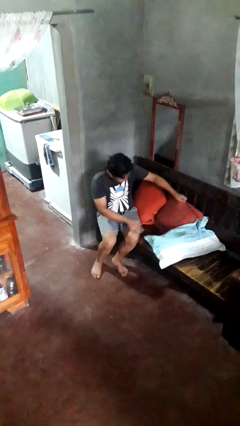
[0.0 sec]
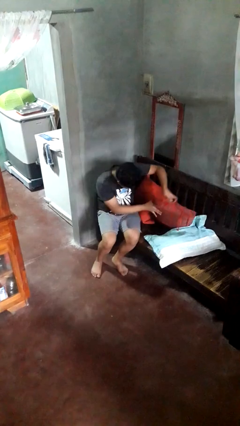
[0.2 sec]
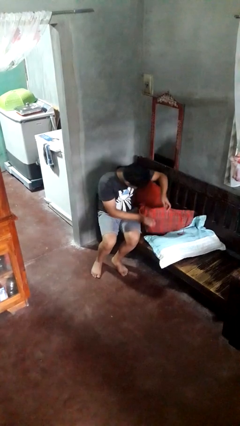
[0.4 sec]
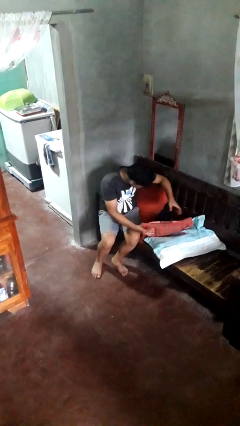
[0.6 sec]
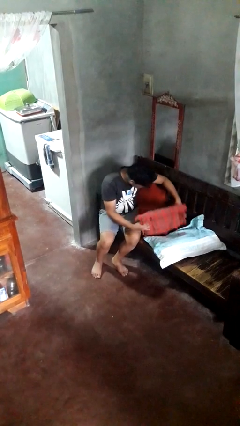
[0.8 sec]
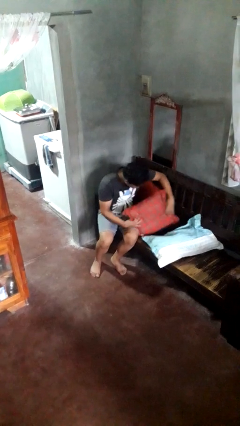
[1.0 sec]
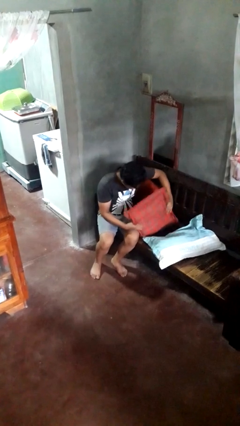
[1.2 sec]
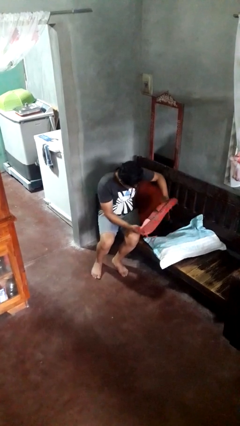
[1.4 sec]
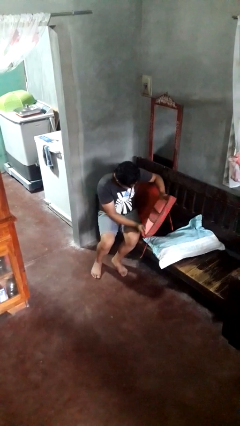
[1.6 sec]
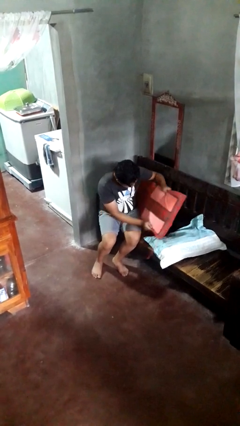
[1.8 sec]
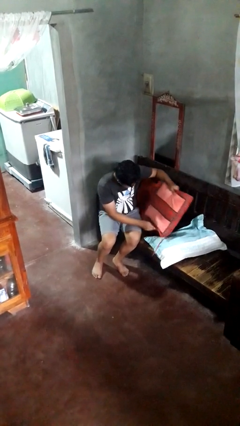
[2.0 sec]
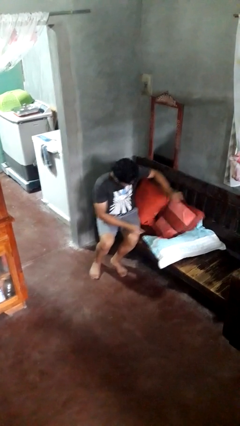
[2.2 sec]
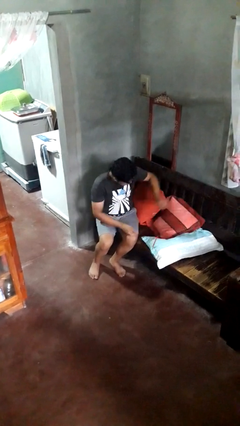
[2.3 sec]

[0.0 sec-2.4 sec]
person searches in couch

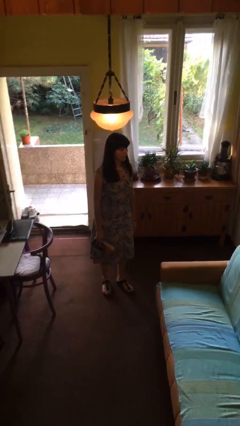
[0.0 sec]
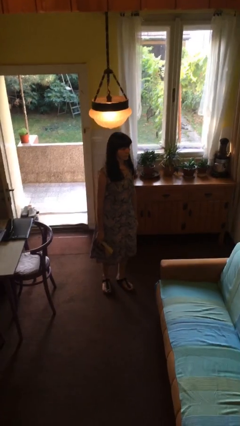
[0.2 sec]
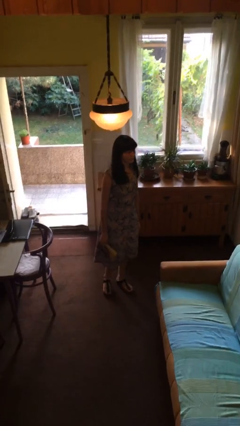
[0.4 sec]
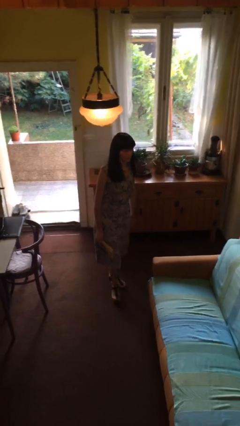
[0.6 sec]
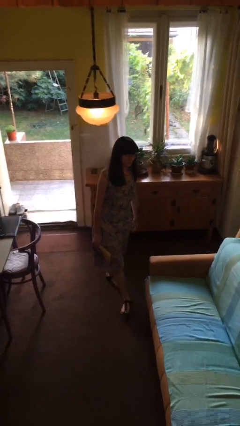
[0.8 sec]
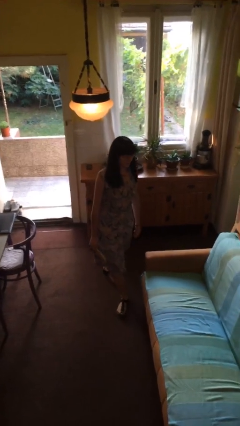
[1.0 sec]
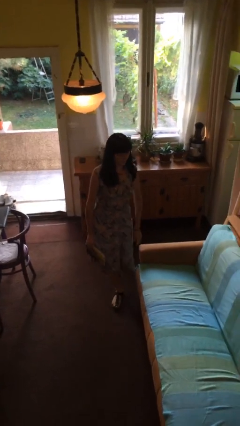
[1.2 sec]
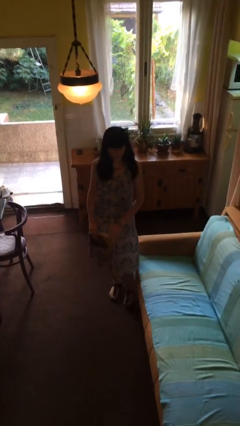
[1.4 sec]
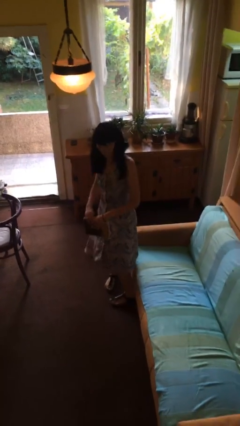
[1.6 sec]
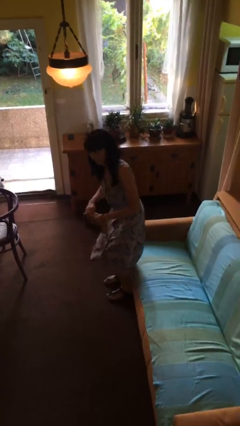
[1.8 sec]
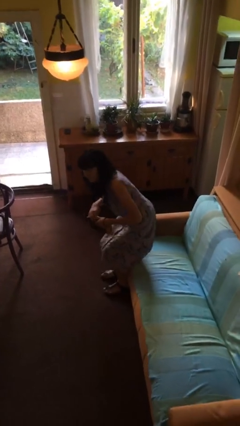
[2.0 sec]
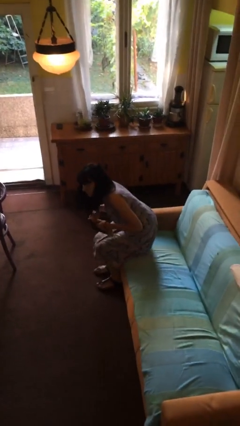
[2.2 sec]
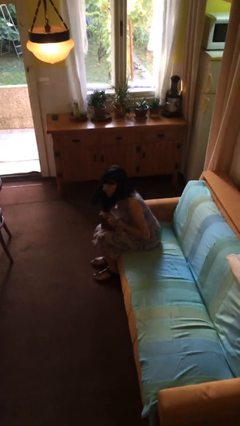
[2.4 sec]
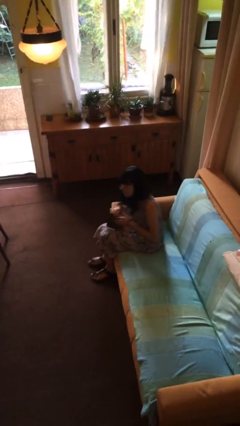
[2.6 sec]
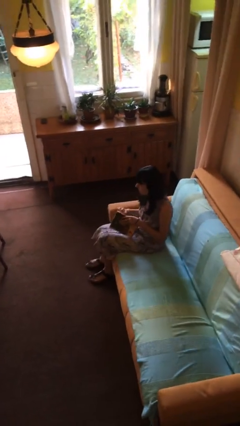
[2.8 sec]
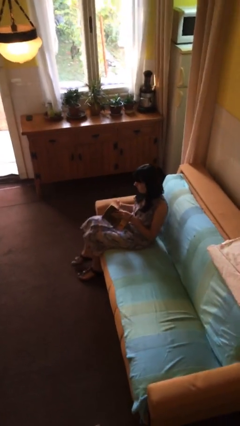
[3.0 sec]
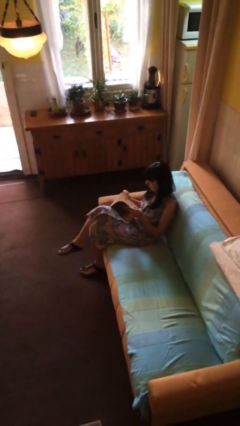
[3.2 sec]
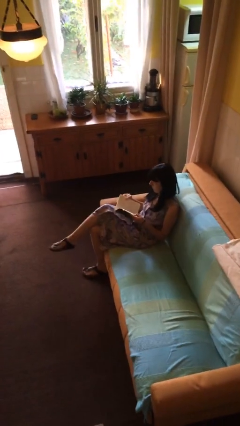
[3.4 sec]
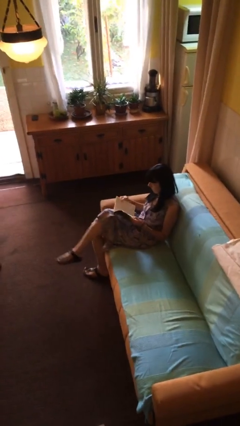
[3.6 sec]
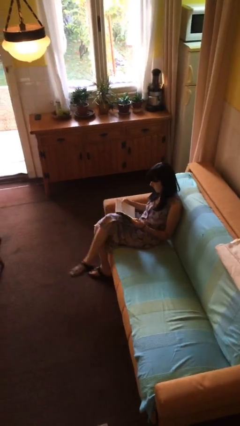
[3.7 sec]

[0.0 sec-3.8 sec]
person sits down

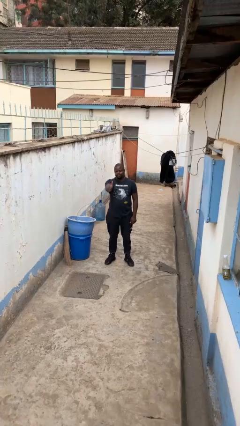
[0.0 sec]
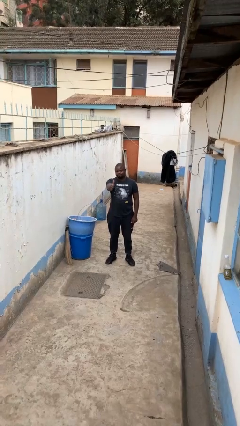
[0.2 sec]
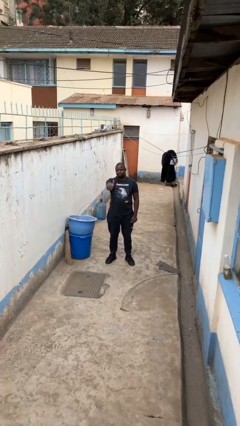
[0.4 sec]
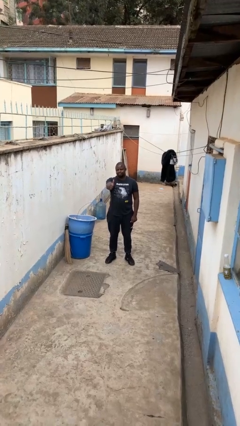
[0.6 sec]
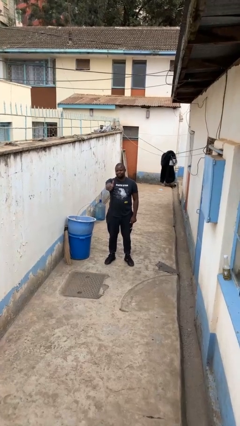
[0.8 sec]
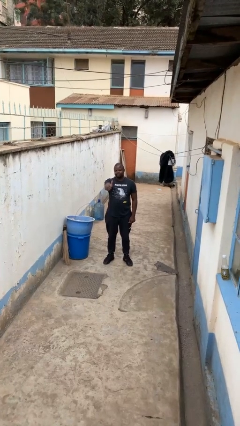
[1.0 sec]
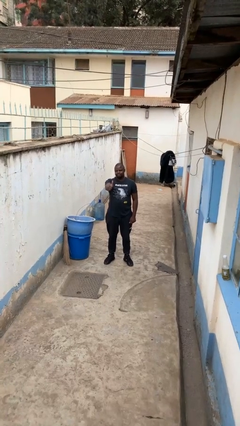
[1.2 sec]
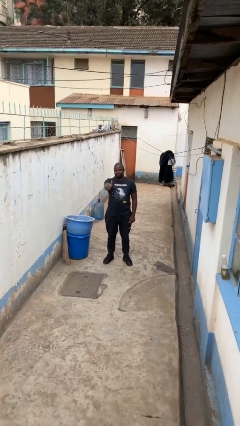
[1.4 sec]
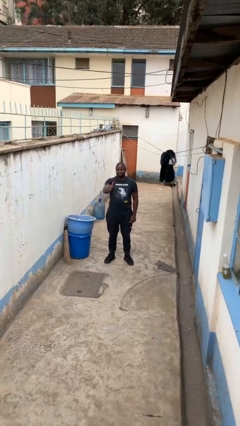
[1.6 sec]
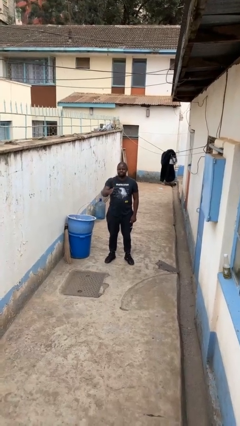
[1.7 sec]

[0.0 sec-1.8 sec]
person gestures thumbs up

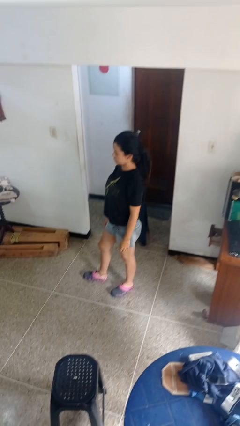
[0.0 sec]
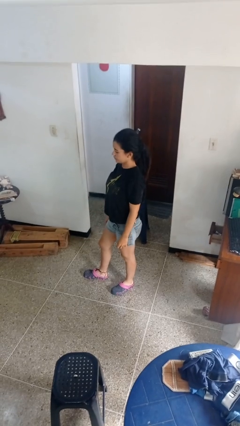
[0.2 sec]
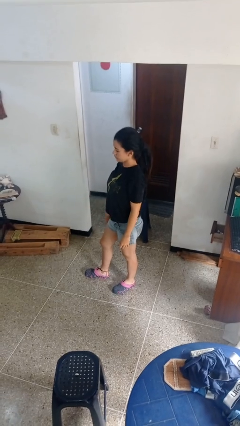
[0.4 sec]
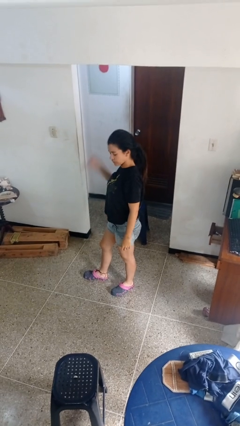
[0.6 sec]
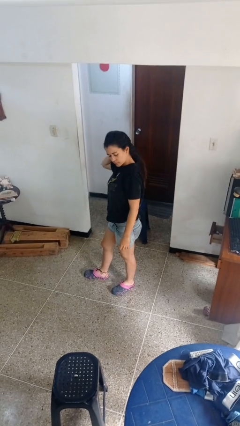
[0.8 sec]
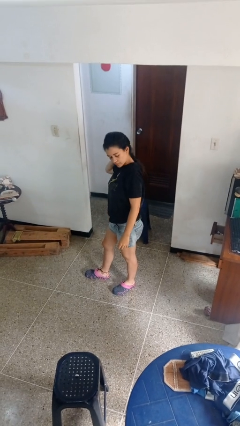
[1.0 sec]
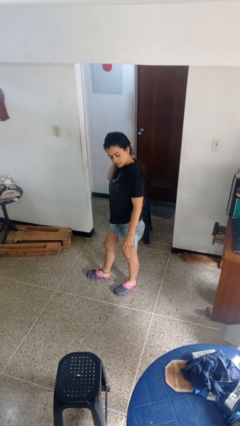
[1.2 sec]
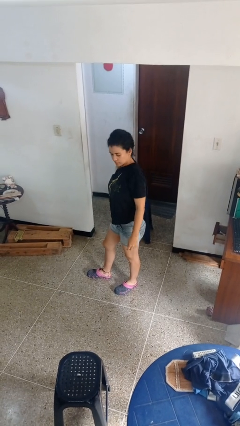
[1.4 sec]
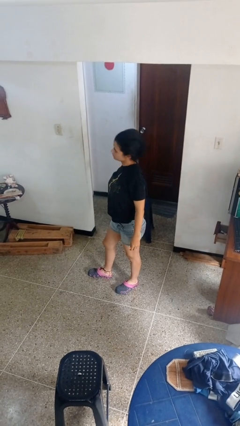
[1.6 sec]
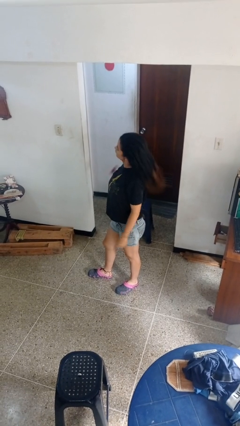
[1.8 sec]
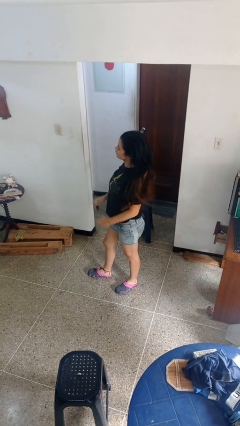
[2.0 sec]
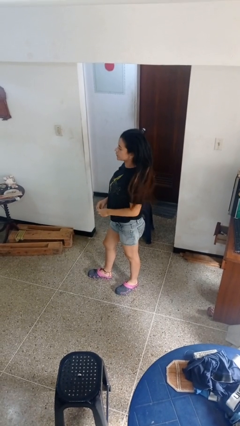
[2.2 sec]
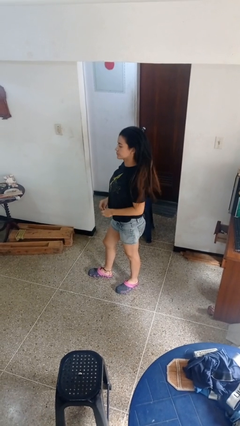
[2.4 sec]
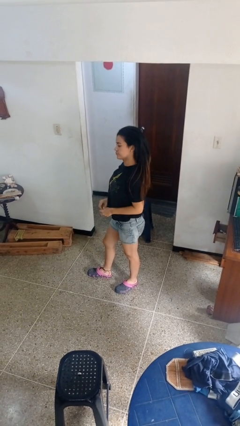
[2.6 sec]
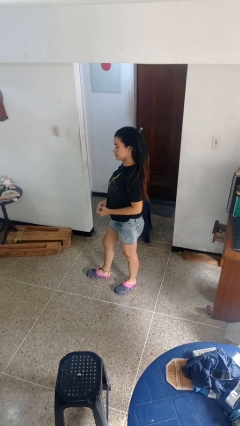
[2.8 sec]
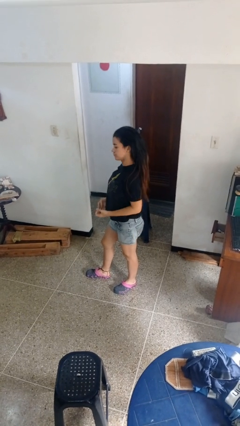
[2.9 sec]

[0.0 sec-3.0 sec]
person takes off hairtie

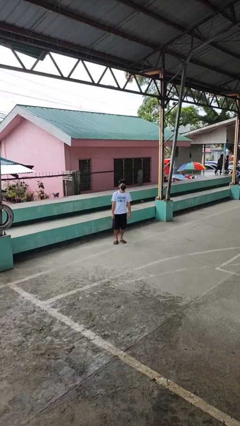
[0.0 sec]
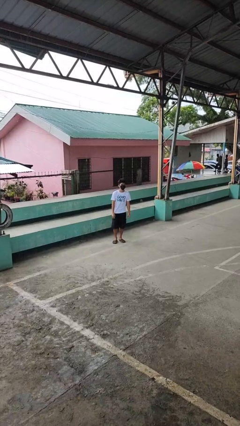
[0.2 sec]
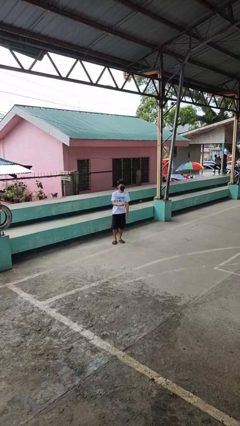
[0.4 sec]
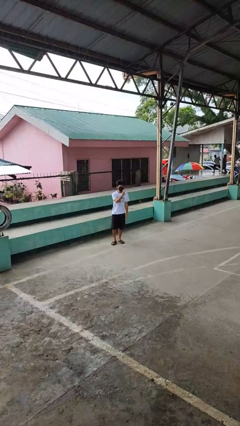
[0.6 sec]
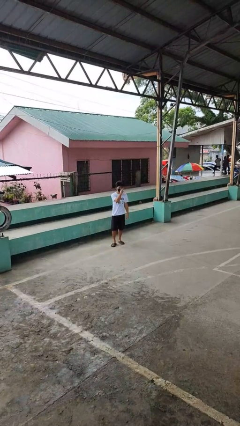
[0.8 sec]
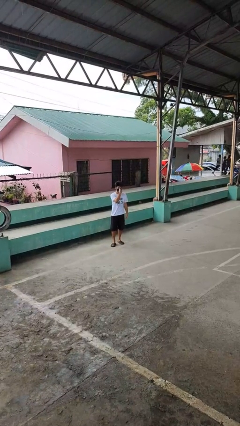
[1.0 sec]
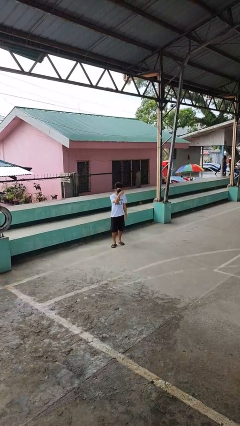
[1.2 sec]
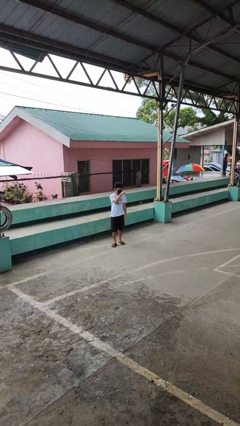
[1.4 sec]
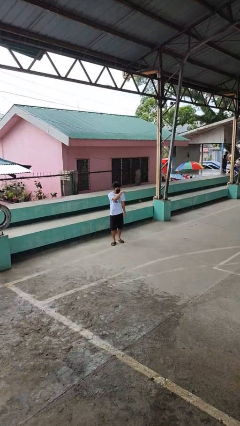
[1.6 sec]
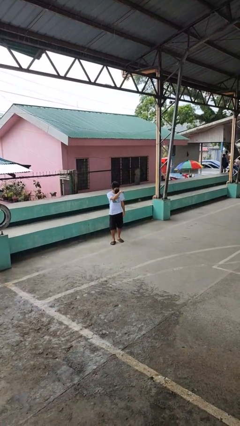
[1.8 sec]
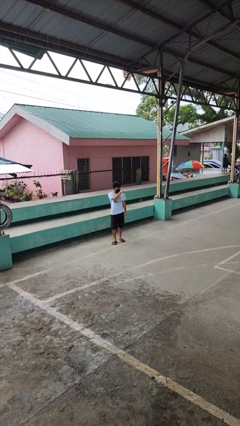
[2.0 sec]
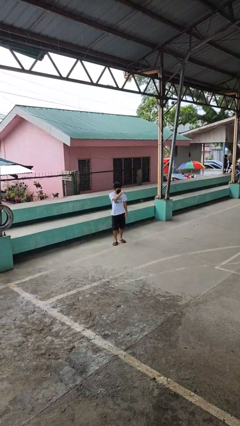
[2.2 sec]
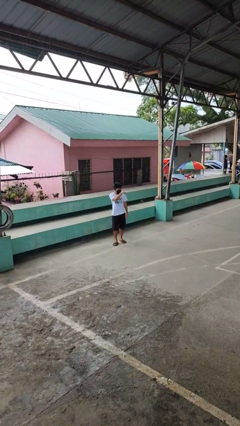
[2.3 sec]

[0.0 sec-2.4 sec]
person gestures watch closely

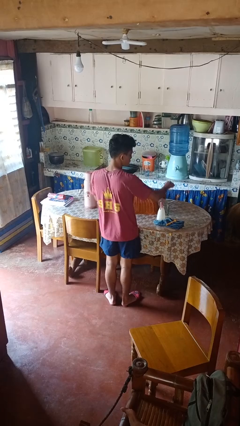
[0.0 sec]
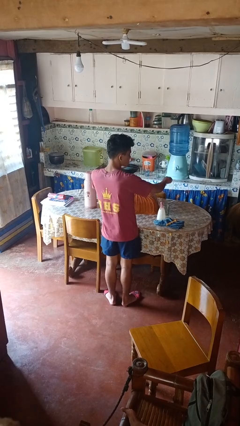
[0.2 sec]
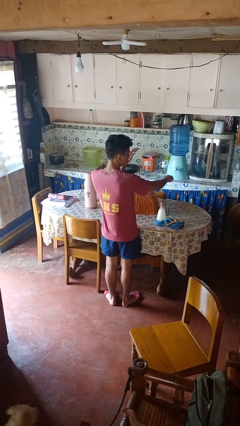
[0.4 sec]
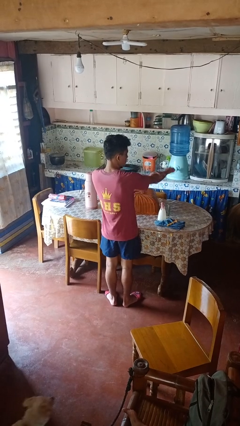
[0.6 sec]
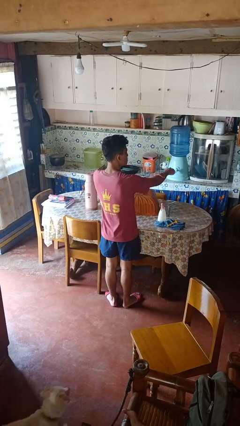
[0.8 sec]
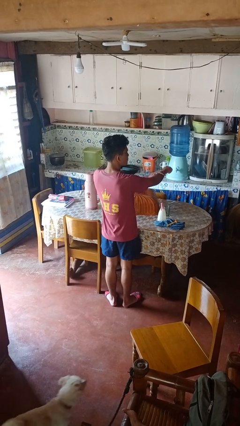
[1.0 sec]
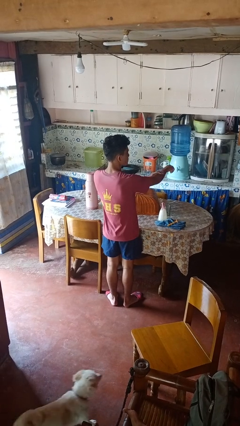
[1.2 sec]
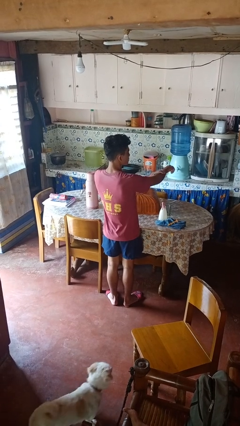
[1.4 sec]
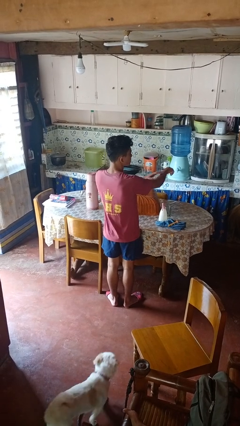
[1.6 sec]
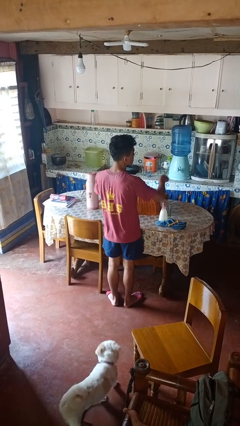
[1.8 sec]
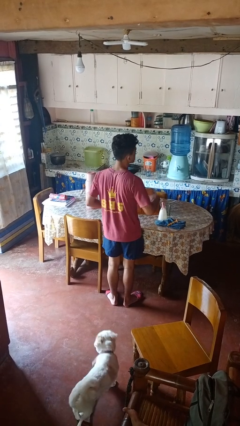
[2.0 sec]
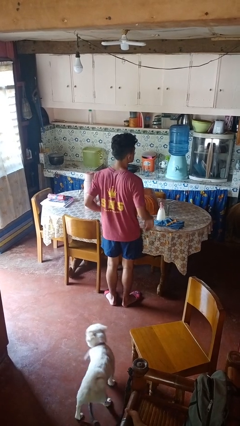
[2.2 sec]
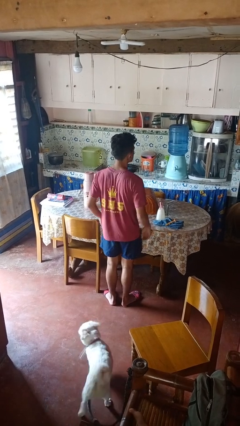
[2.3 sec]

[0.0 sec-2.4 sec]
person swats bug

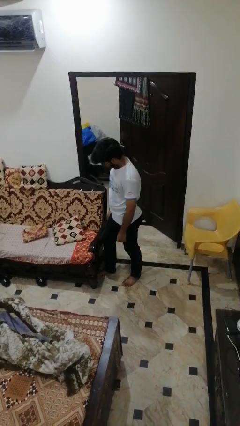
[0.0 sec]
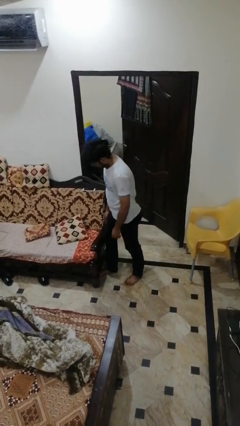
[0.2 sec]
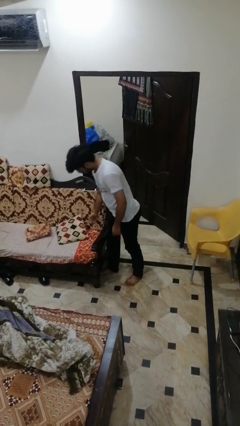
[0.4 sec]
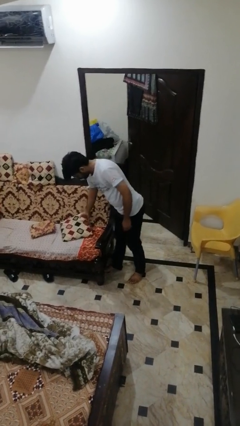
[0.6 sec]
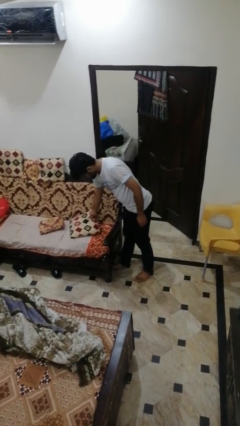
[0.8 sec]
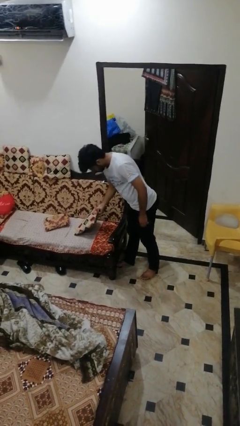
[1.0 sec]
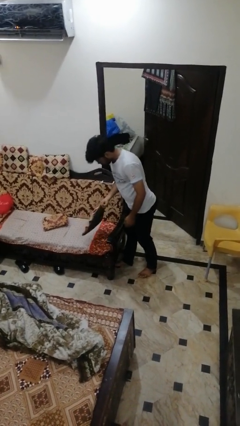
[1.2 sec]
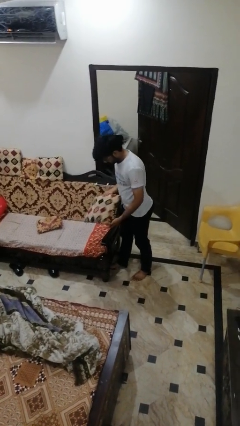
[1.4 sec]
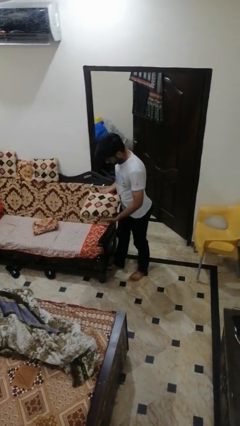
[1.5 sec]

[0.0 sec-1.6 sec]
person picks up object from couch
